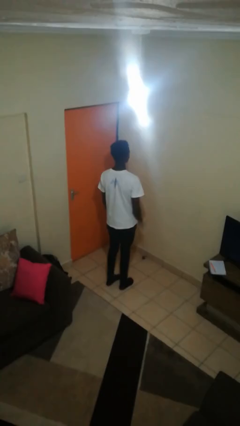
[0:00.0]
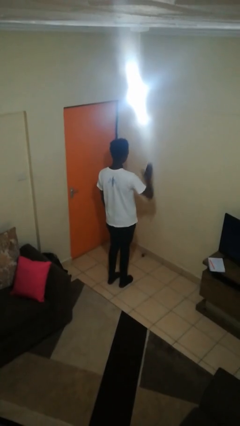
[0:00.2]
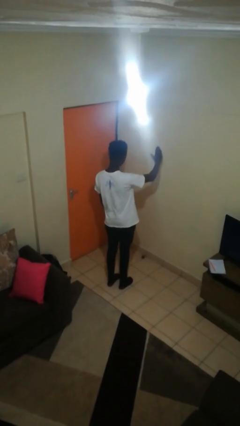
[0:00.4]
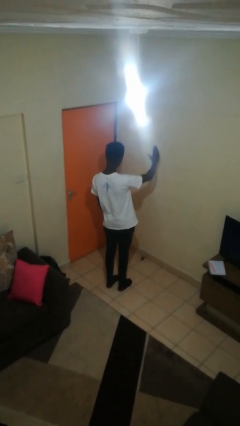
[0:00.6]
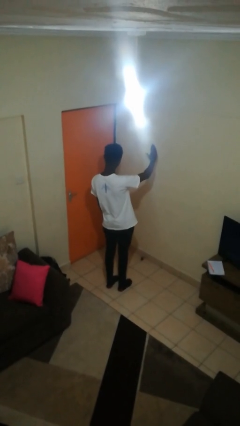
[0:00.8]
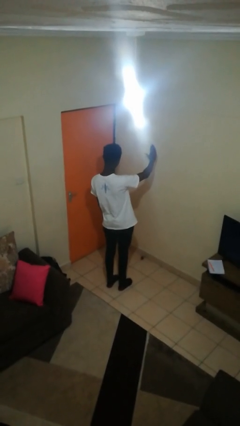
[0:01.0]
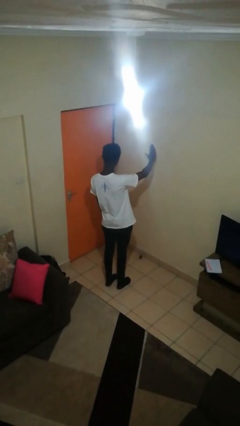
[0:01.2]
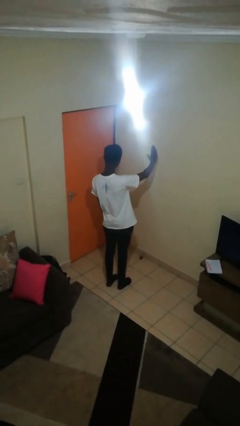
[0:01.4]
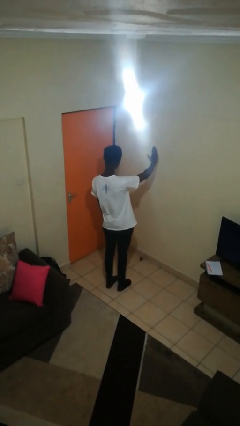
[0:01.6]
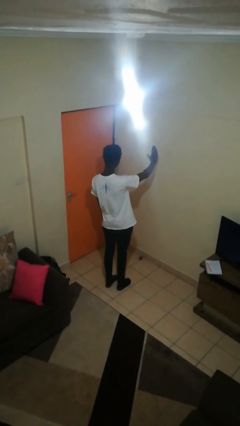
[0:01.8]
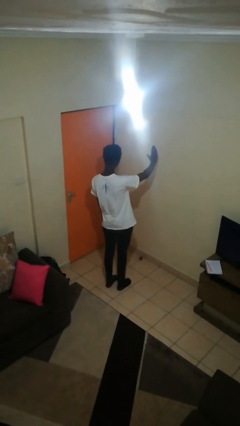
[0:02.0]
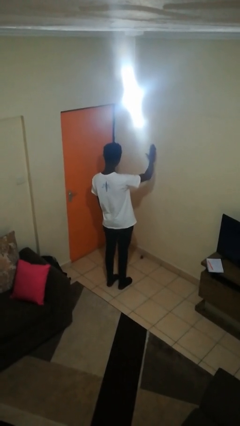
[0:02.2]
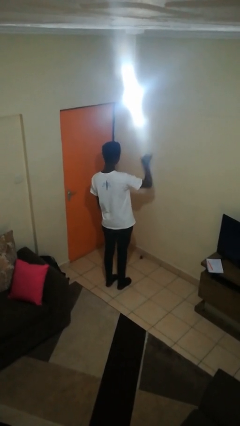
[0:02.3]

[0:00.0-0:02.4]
person gestures stop

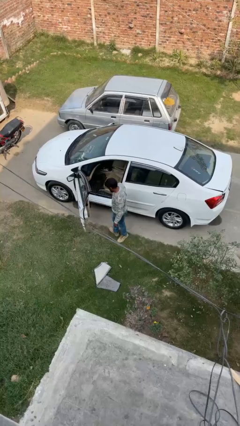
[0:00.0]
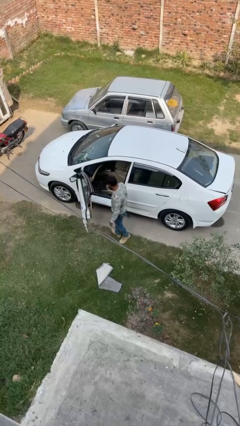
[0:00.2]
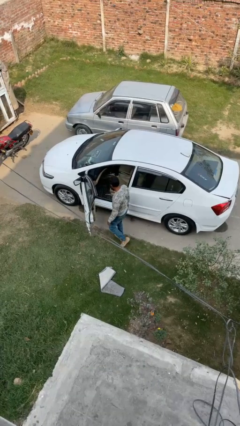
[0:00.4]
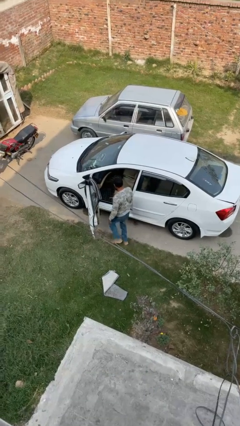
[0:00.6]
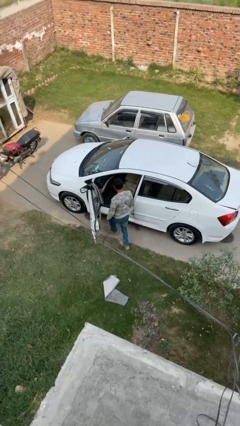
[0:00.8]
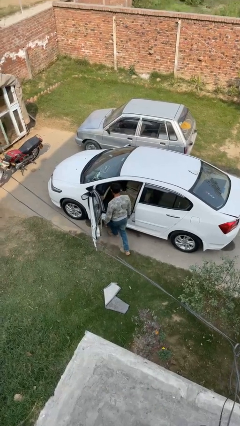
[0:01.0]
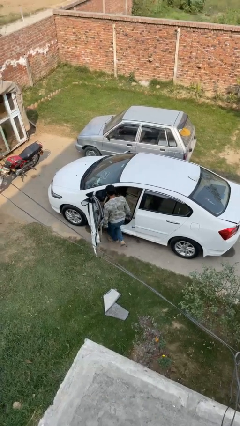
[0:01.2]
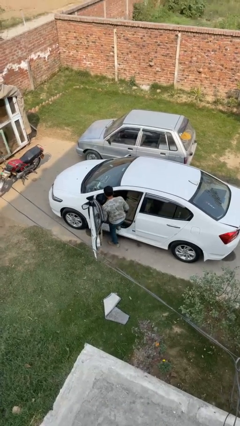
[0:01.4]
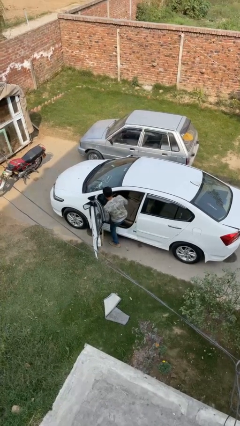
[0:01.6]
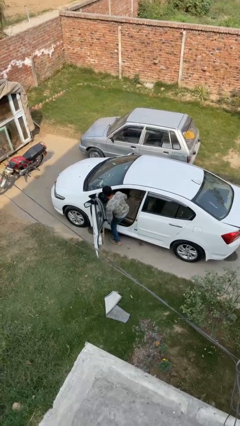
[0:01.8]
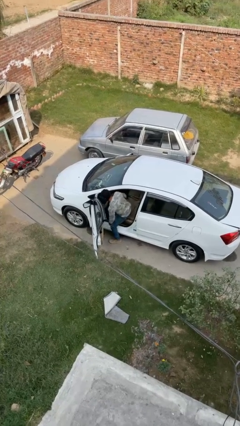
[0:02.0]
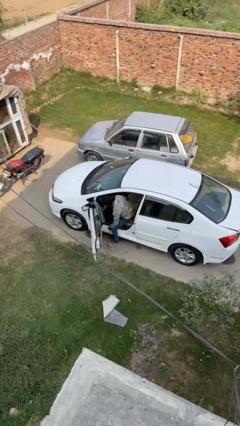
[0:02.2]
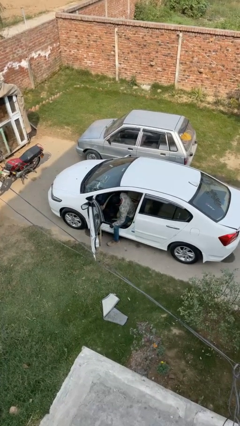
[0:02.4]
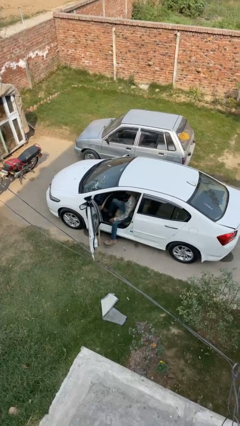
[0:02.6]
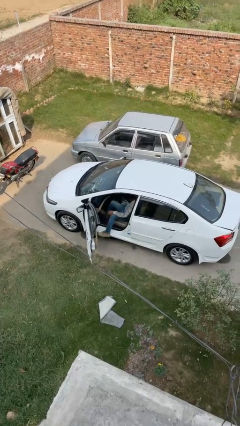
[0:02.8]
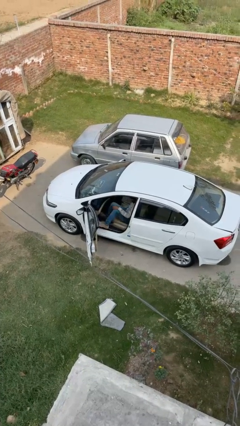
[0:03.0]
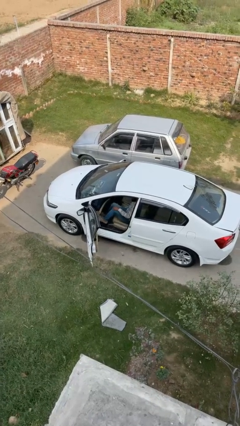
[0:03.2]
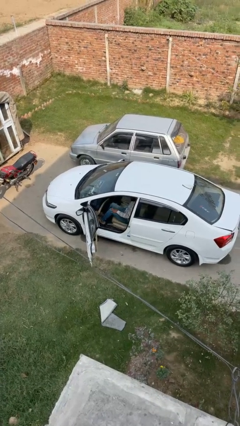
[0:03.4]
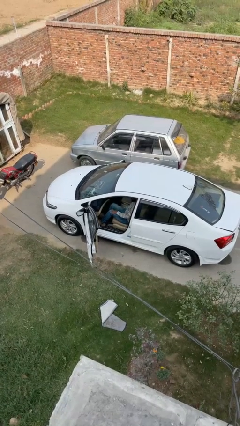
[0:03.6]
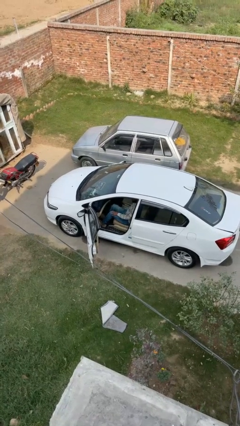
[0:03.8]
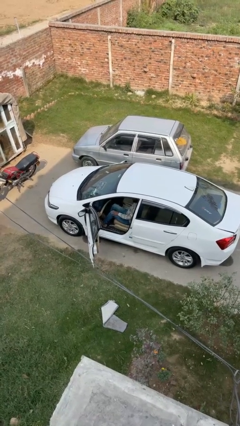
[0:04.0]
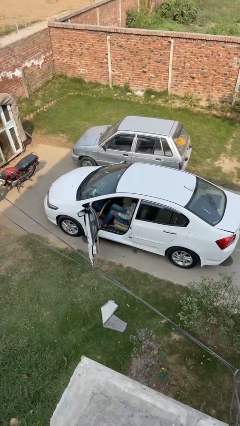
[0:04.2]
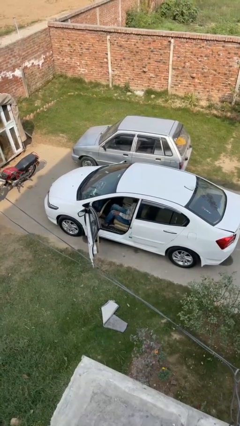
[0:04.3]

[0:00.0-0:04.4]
person enters car

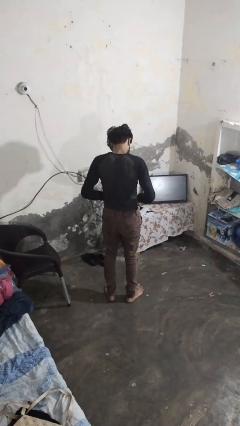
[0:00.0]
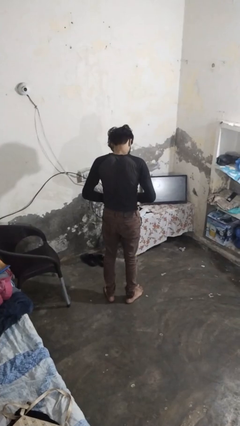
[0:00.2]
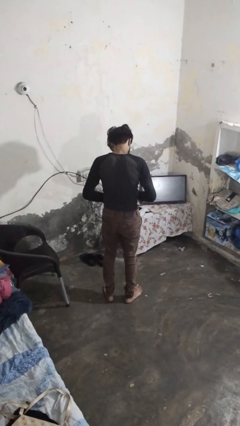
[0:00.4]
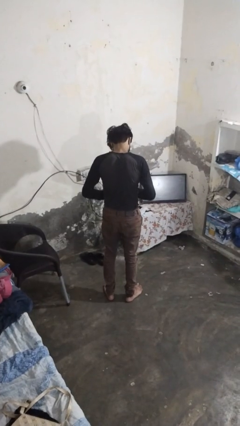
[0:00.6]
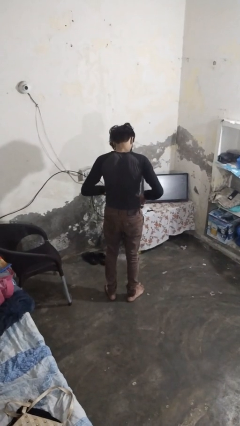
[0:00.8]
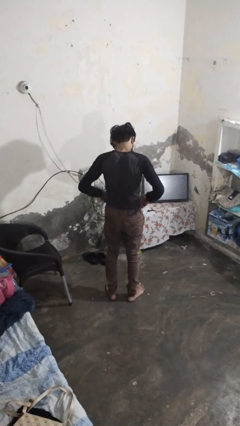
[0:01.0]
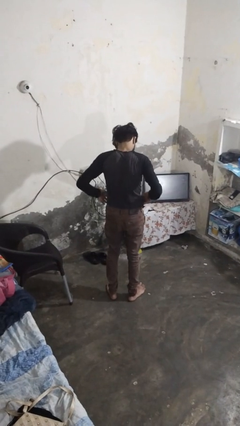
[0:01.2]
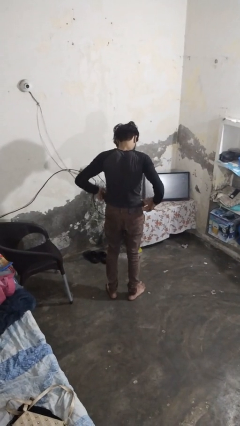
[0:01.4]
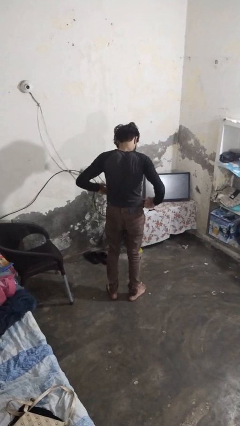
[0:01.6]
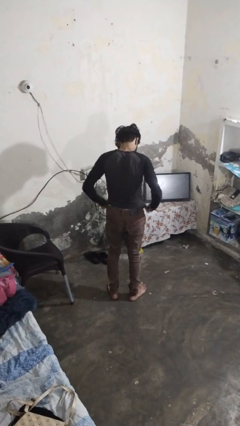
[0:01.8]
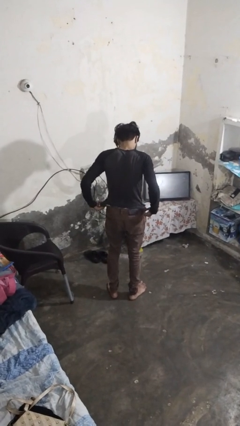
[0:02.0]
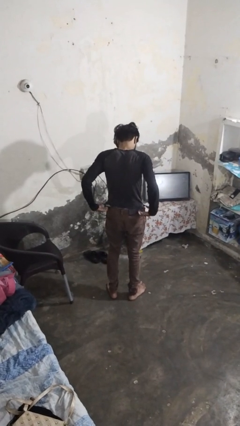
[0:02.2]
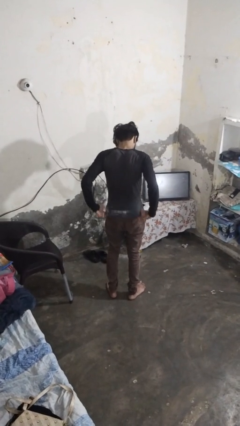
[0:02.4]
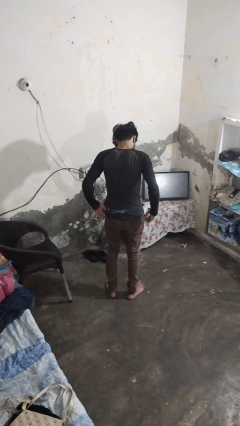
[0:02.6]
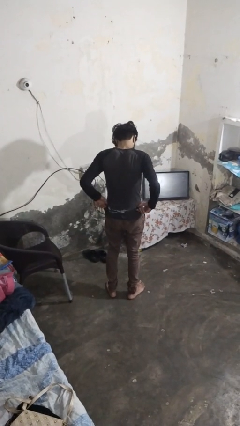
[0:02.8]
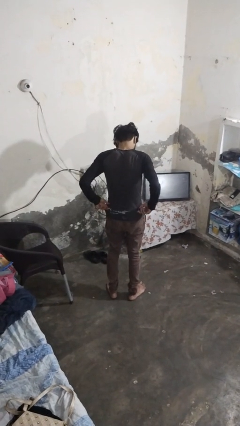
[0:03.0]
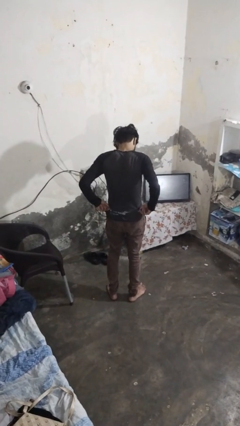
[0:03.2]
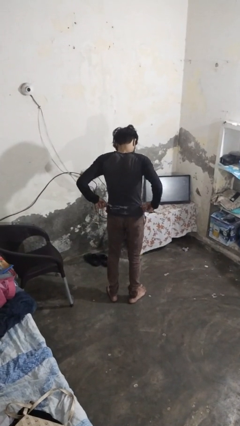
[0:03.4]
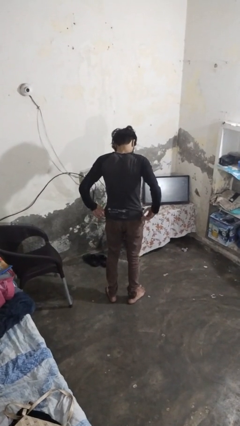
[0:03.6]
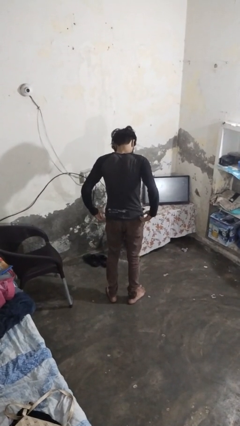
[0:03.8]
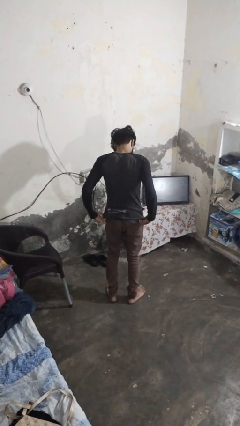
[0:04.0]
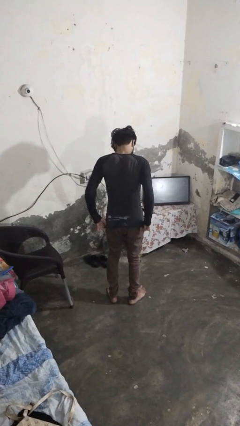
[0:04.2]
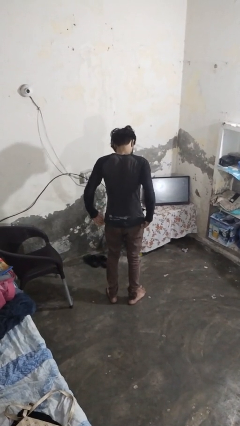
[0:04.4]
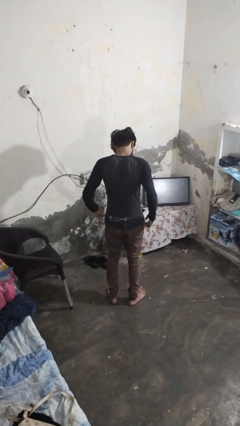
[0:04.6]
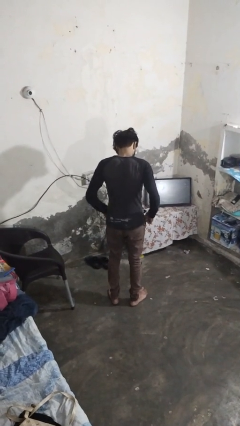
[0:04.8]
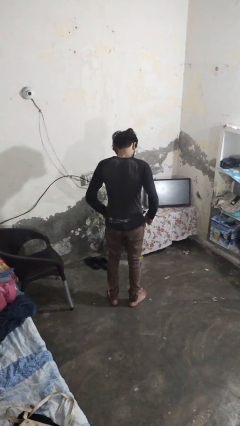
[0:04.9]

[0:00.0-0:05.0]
person untucks shirt

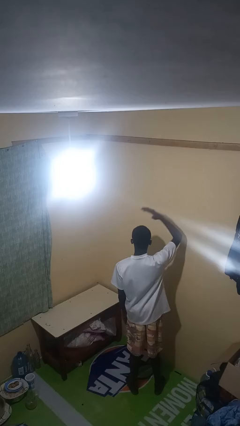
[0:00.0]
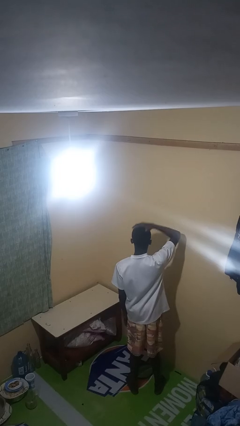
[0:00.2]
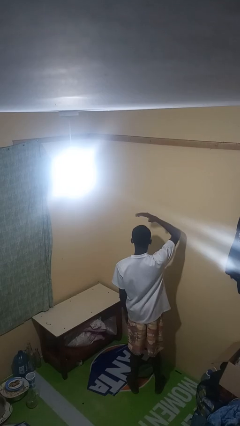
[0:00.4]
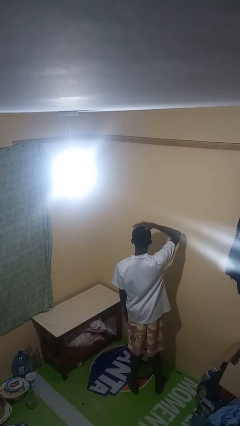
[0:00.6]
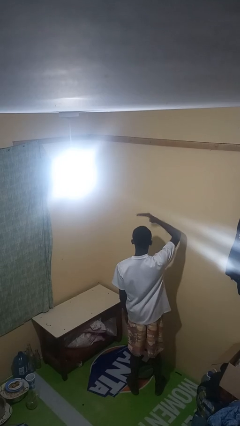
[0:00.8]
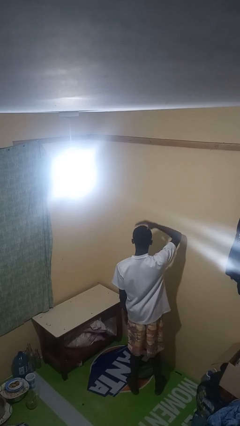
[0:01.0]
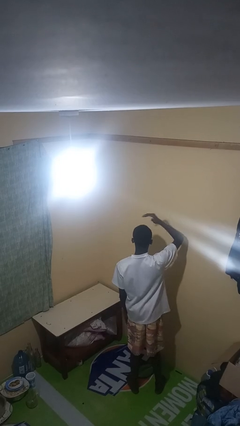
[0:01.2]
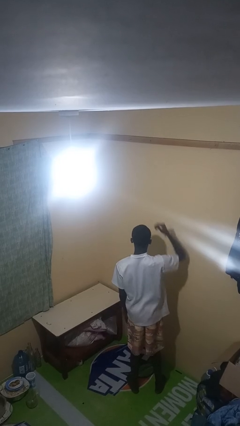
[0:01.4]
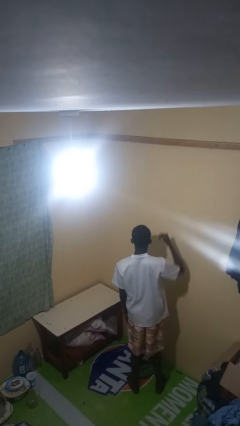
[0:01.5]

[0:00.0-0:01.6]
person pats head

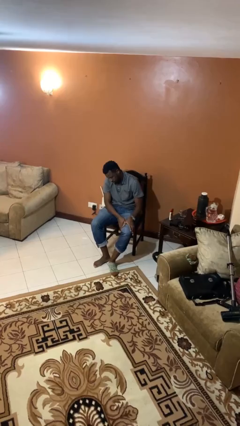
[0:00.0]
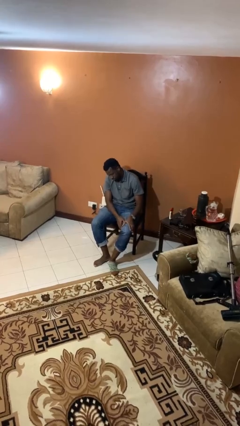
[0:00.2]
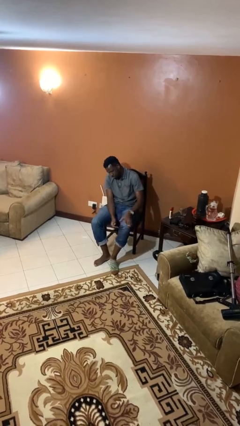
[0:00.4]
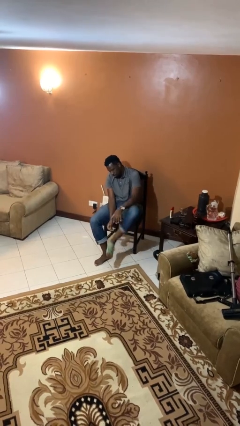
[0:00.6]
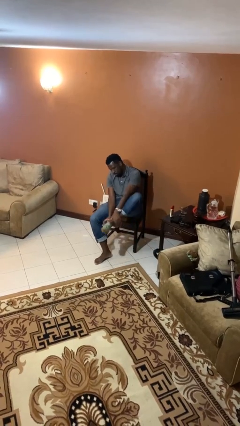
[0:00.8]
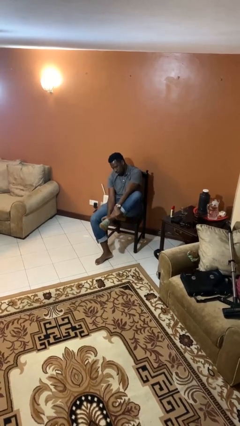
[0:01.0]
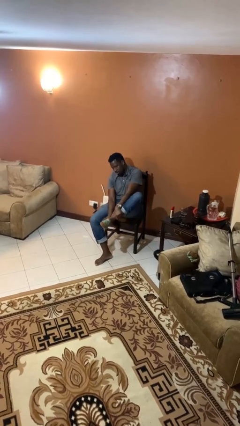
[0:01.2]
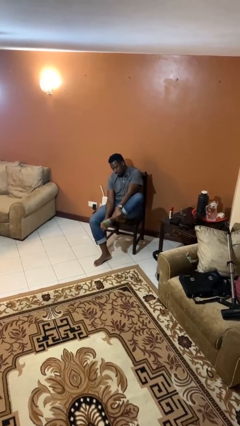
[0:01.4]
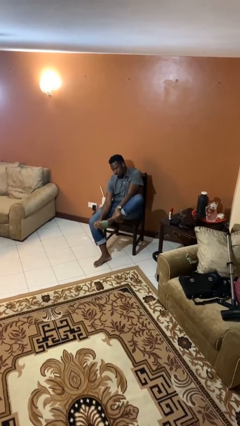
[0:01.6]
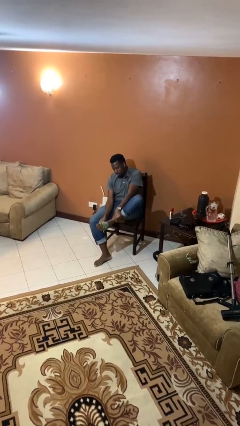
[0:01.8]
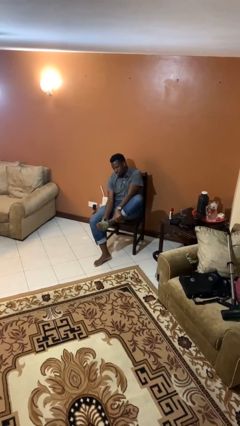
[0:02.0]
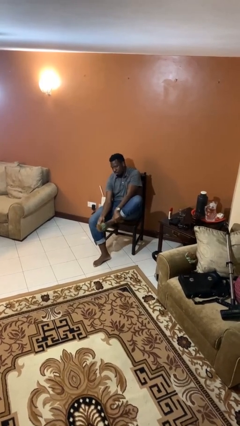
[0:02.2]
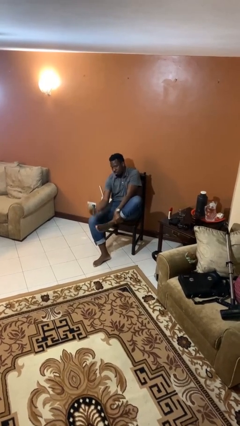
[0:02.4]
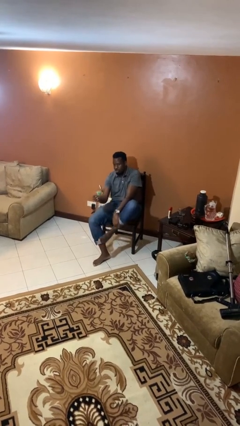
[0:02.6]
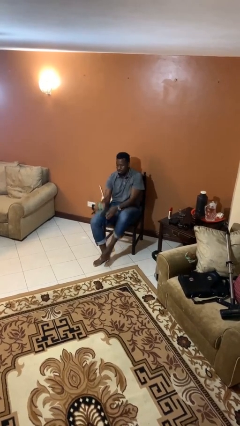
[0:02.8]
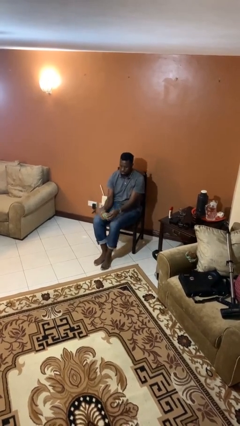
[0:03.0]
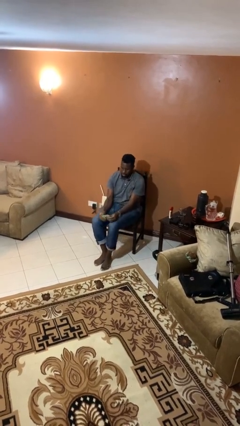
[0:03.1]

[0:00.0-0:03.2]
person takes off socks

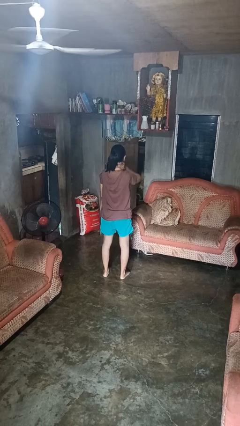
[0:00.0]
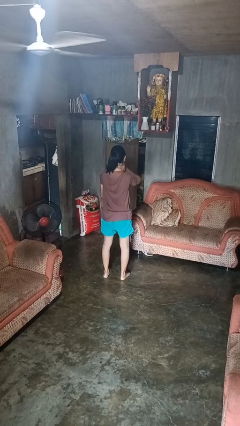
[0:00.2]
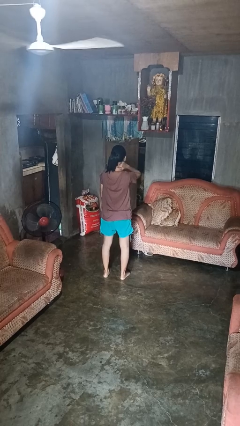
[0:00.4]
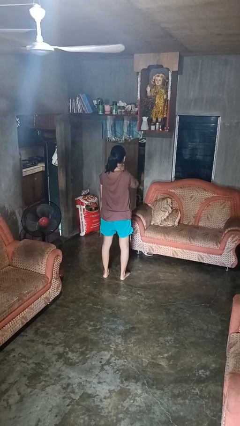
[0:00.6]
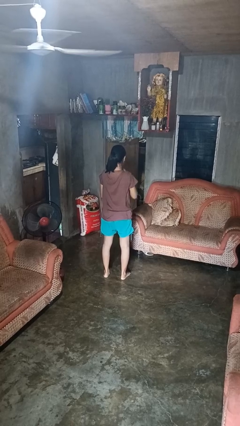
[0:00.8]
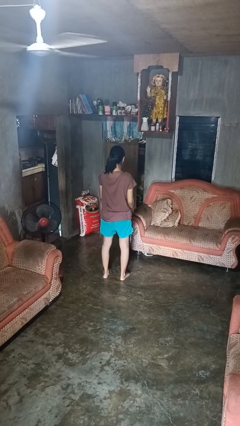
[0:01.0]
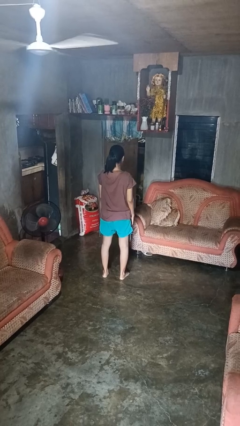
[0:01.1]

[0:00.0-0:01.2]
person rubs neck

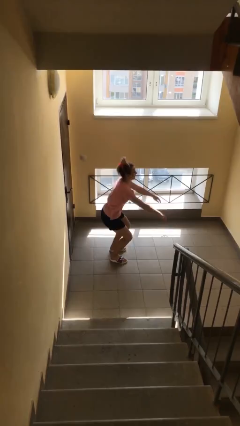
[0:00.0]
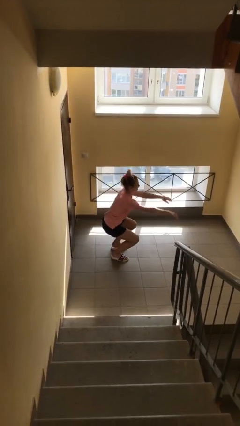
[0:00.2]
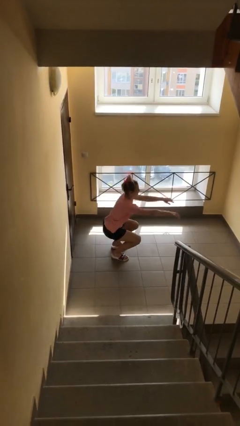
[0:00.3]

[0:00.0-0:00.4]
person squats
